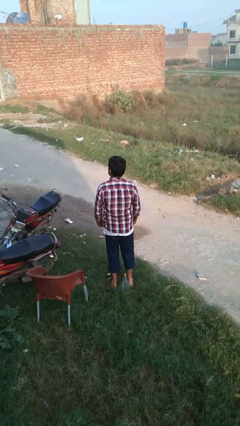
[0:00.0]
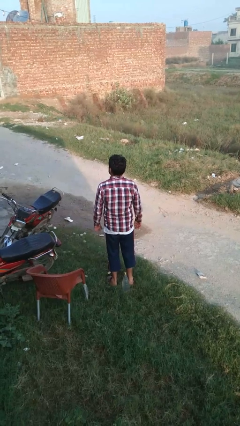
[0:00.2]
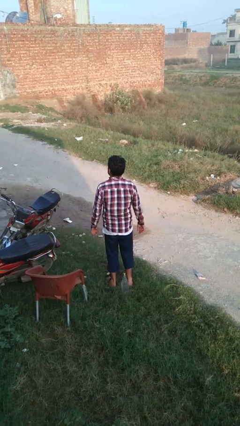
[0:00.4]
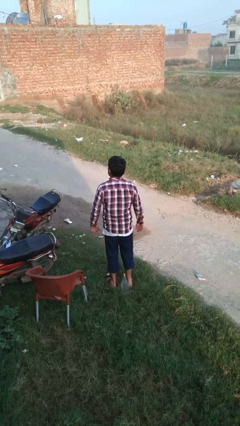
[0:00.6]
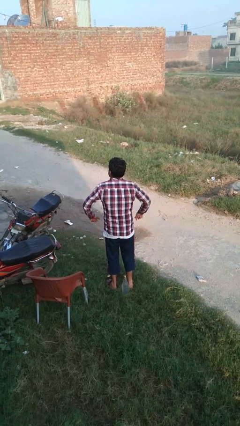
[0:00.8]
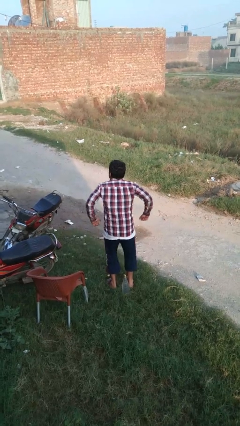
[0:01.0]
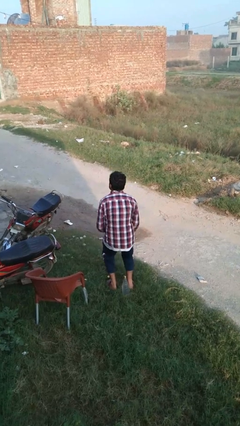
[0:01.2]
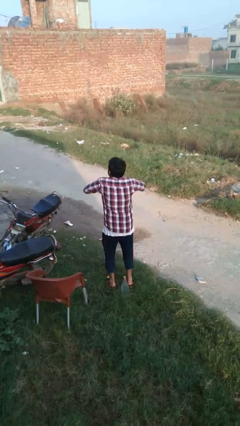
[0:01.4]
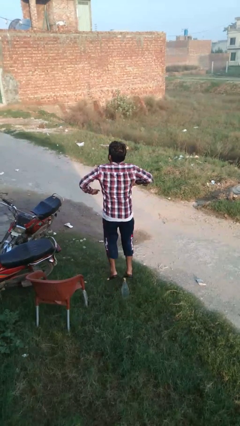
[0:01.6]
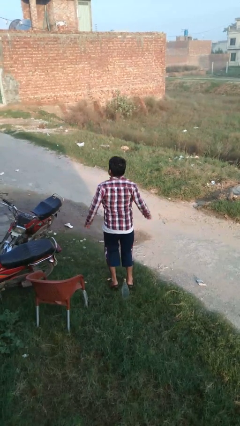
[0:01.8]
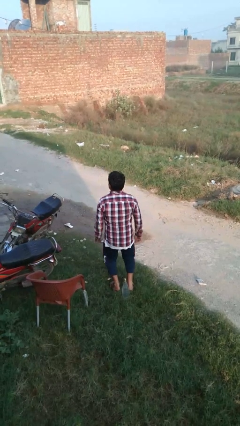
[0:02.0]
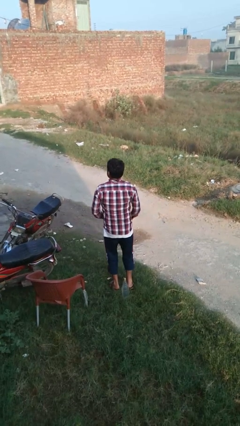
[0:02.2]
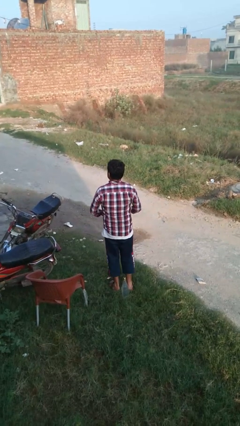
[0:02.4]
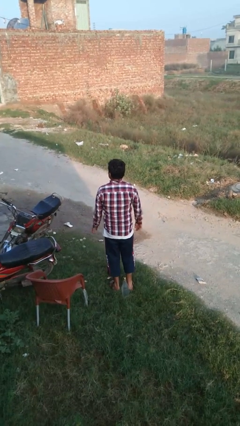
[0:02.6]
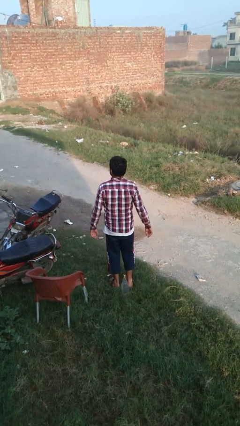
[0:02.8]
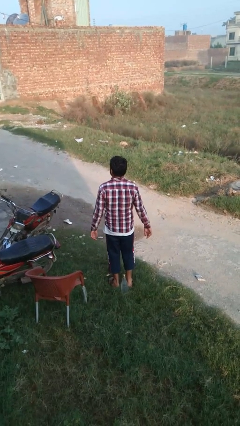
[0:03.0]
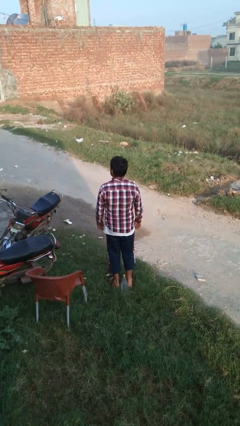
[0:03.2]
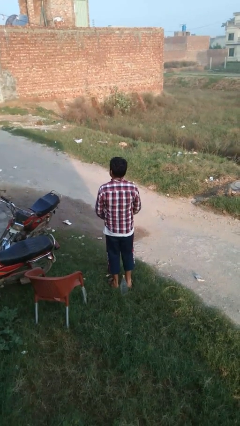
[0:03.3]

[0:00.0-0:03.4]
person jumps

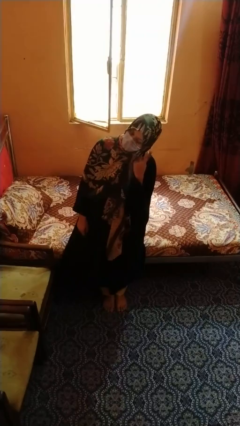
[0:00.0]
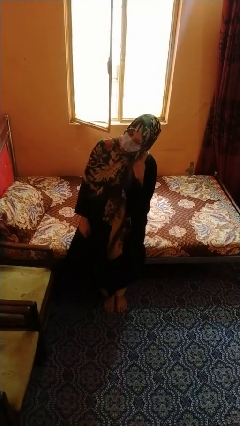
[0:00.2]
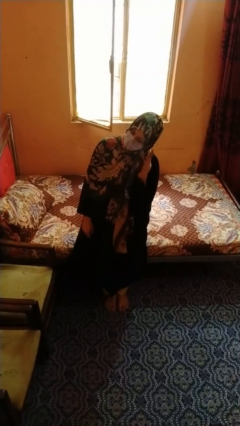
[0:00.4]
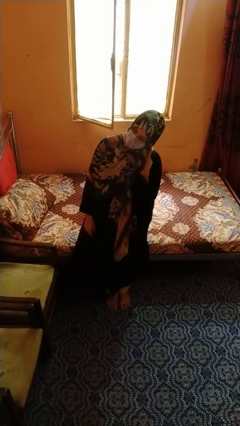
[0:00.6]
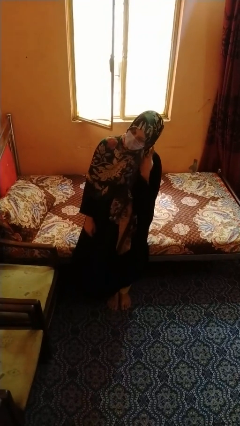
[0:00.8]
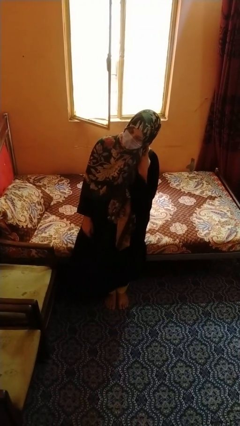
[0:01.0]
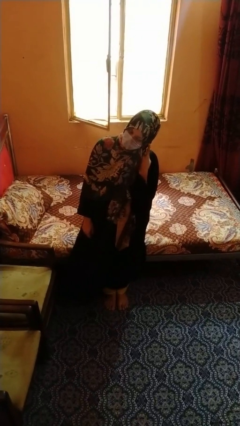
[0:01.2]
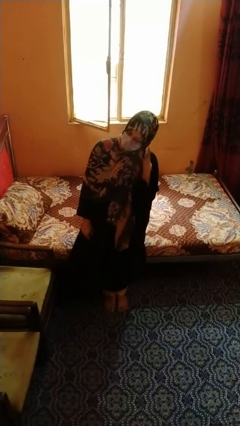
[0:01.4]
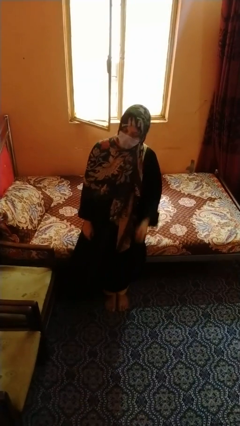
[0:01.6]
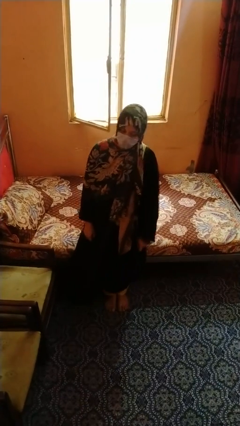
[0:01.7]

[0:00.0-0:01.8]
person gestures listen closely

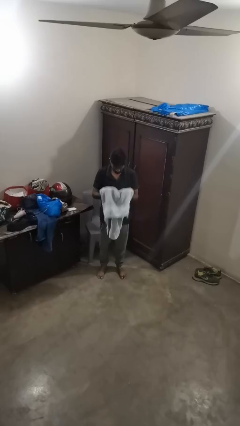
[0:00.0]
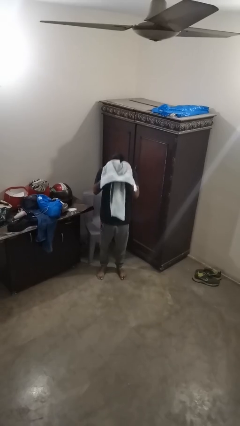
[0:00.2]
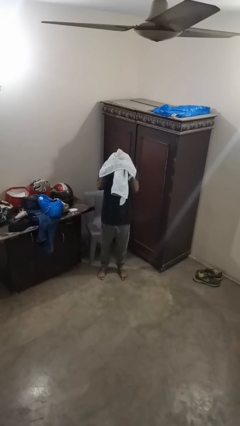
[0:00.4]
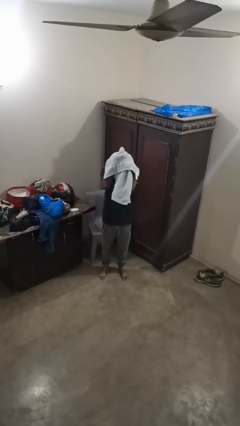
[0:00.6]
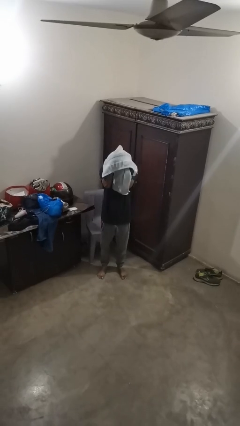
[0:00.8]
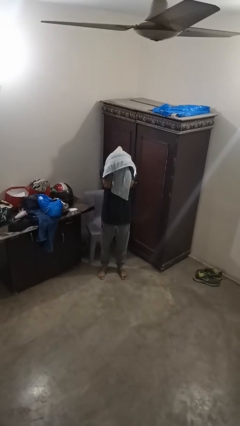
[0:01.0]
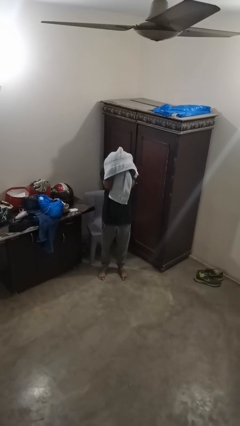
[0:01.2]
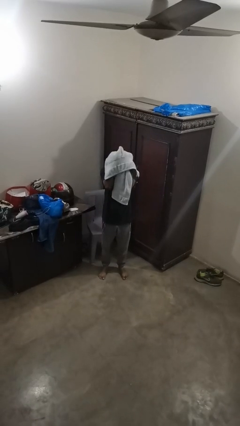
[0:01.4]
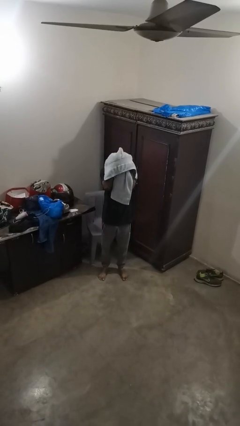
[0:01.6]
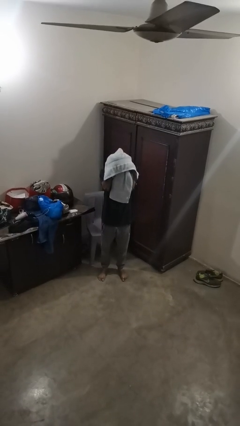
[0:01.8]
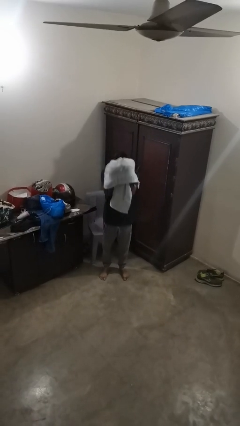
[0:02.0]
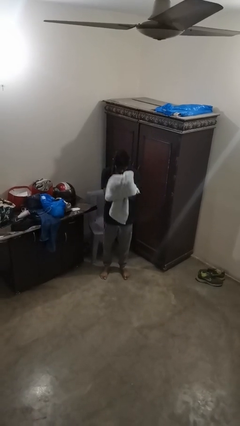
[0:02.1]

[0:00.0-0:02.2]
person dries hair with towel

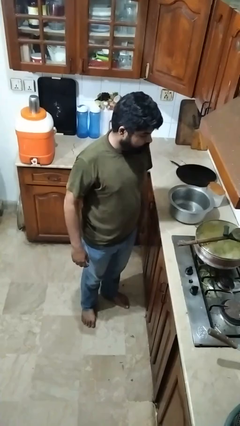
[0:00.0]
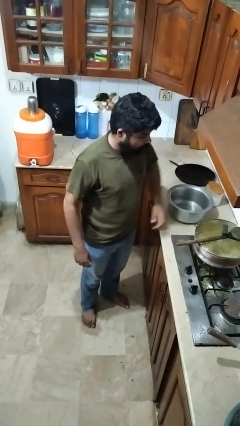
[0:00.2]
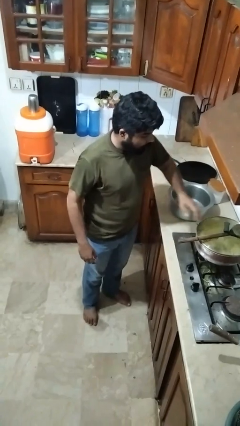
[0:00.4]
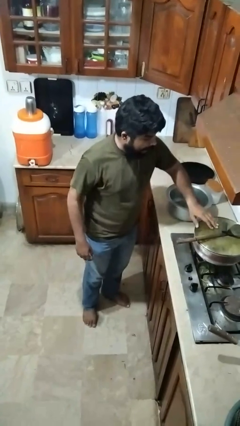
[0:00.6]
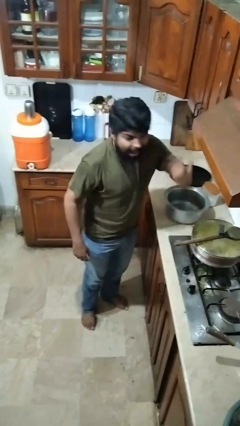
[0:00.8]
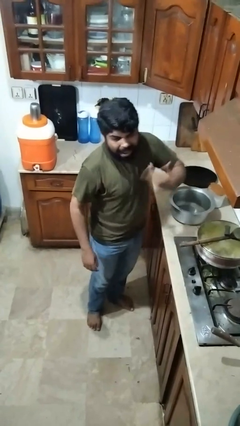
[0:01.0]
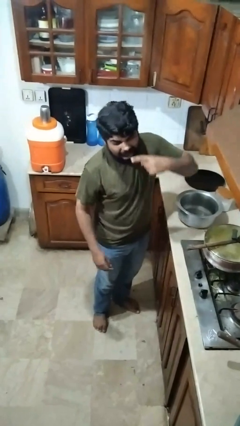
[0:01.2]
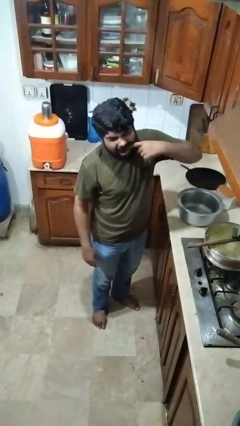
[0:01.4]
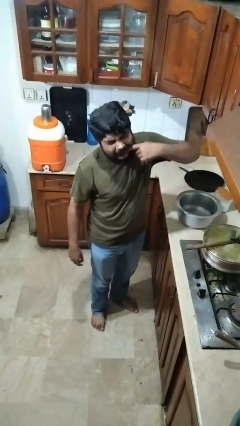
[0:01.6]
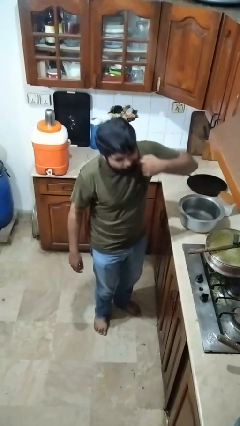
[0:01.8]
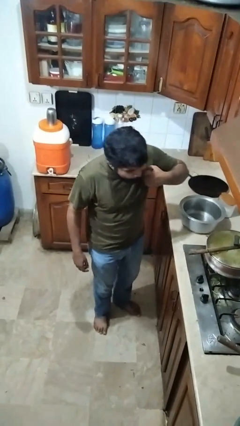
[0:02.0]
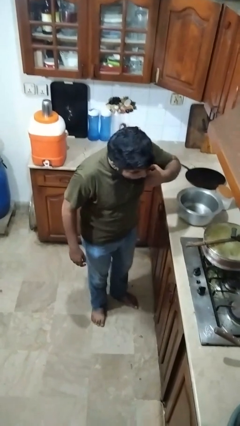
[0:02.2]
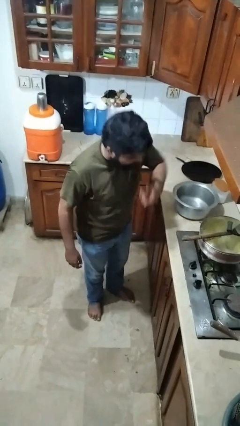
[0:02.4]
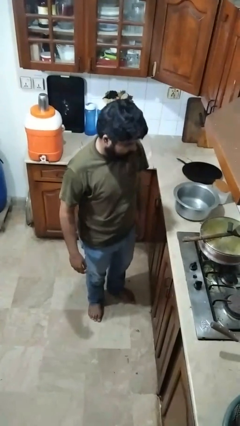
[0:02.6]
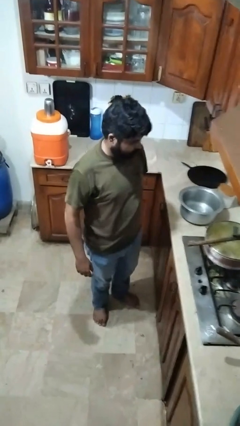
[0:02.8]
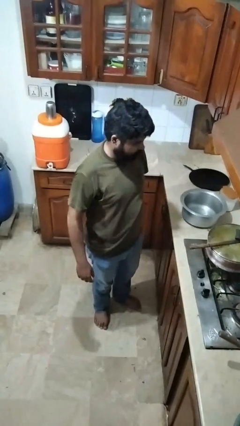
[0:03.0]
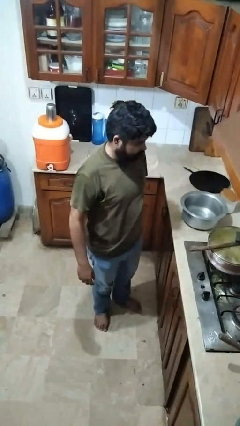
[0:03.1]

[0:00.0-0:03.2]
person burns hand

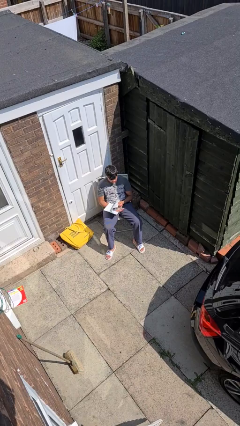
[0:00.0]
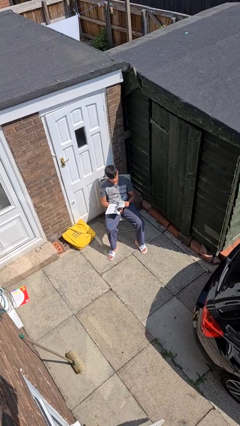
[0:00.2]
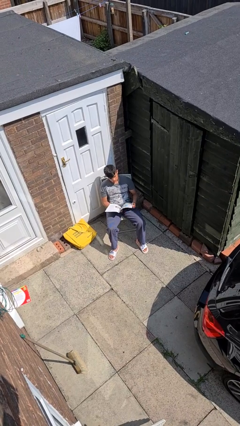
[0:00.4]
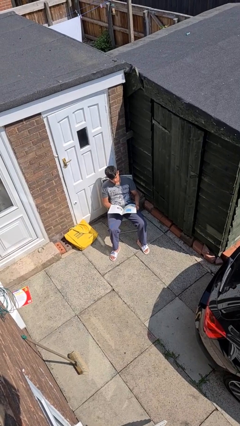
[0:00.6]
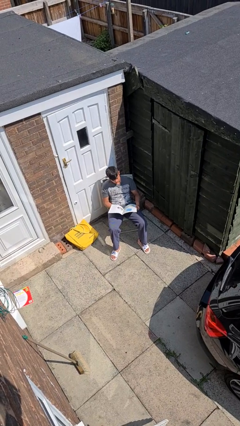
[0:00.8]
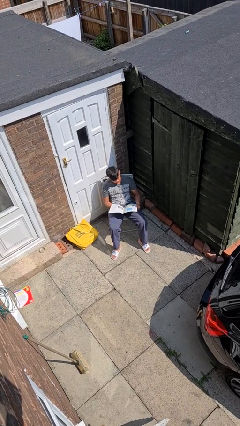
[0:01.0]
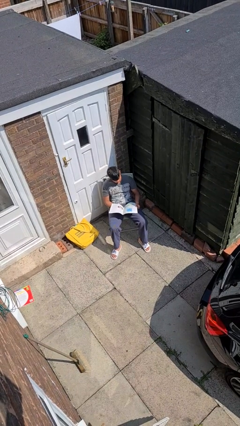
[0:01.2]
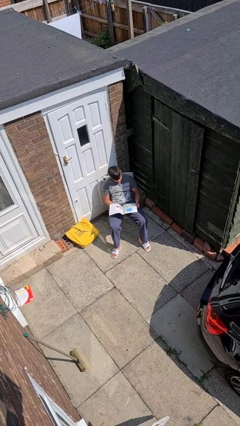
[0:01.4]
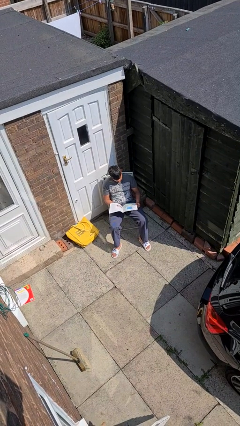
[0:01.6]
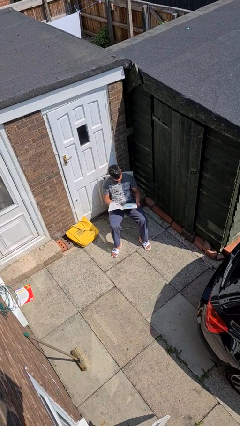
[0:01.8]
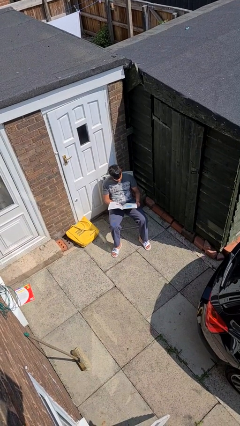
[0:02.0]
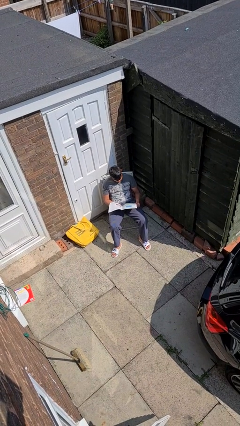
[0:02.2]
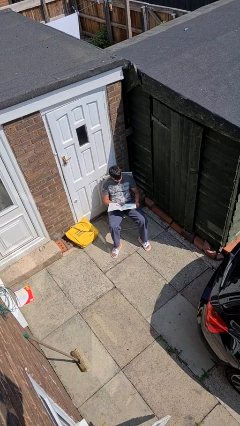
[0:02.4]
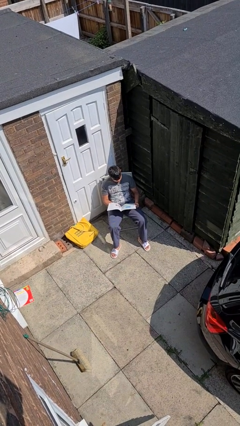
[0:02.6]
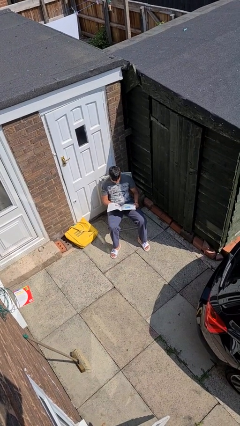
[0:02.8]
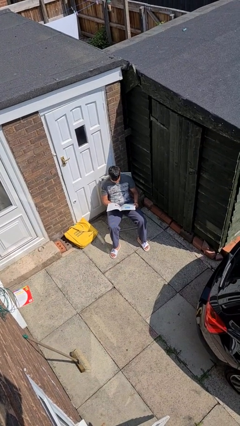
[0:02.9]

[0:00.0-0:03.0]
person reads newspaper

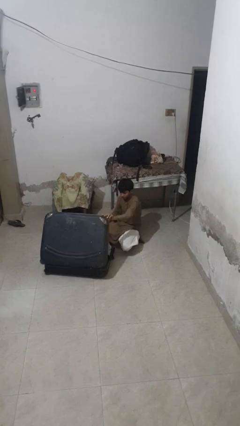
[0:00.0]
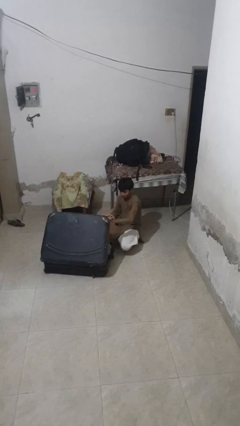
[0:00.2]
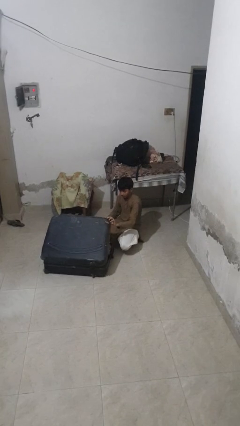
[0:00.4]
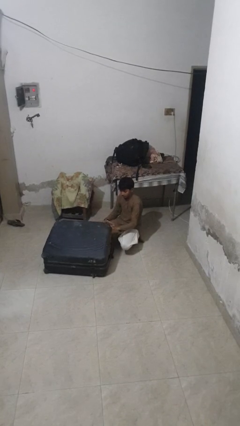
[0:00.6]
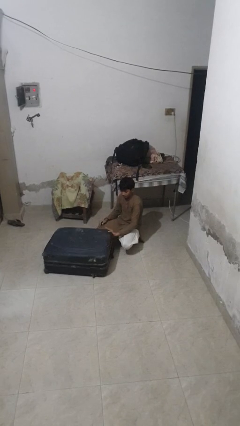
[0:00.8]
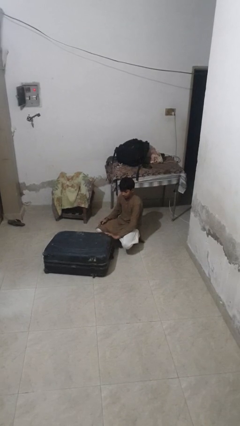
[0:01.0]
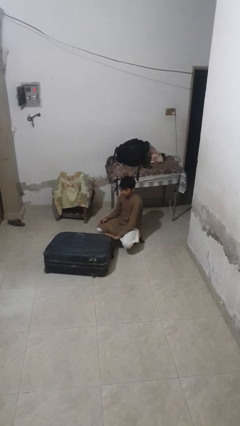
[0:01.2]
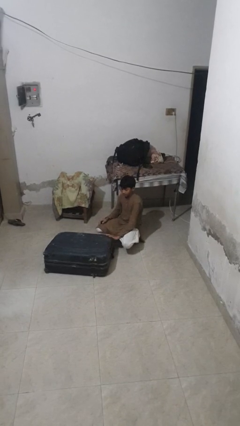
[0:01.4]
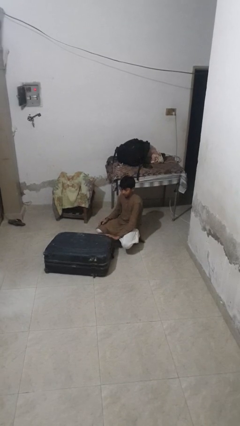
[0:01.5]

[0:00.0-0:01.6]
person closes suitcase

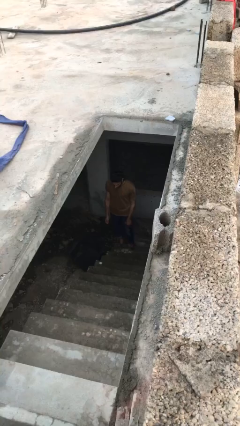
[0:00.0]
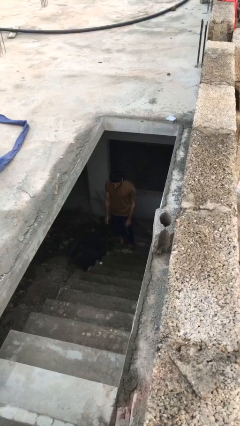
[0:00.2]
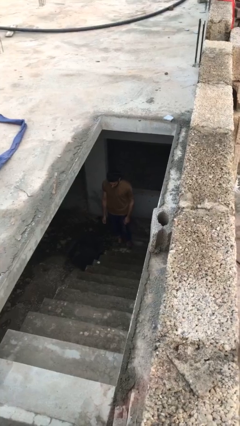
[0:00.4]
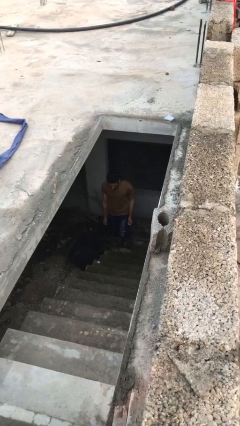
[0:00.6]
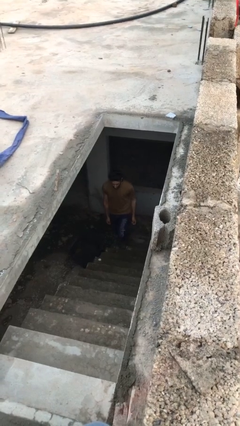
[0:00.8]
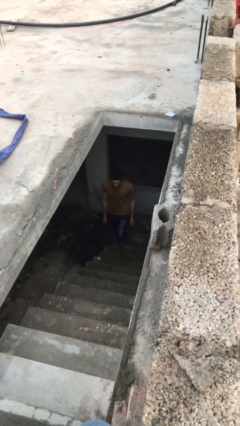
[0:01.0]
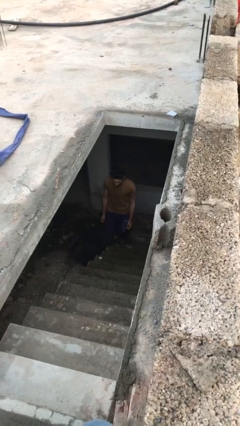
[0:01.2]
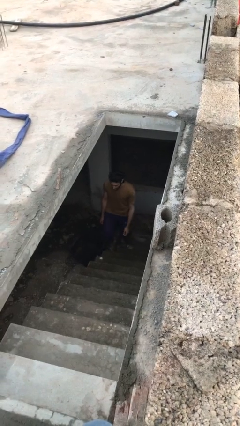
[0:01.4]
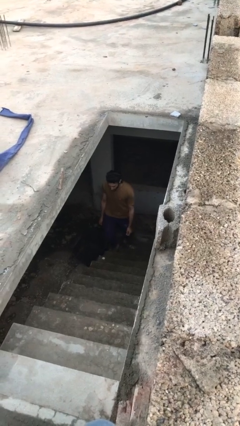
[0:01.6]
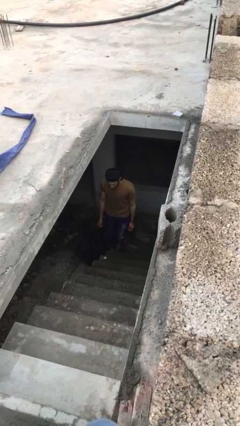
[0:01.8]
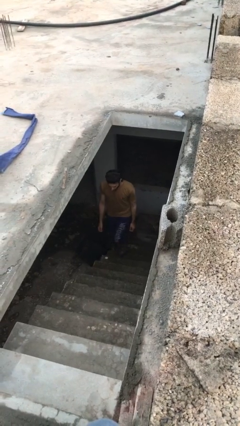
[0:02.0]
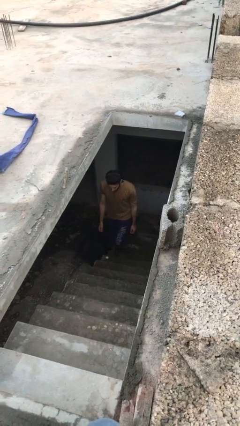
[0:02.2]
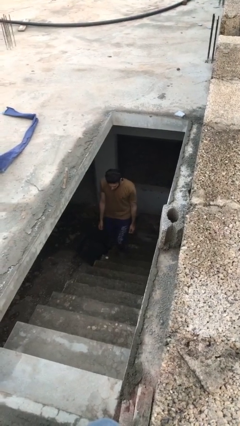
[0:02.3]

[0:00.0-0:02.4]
person climbs up stairs
